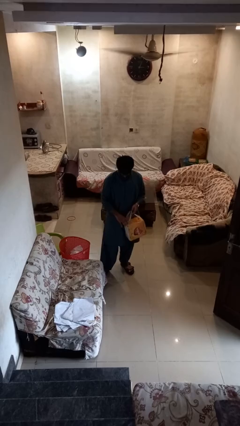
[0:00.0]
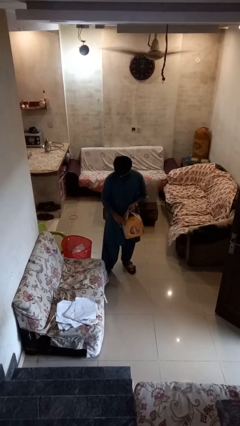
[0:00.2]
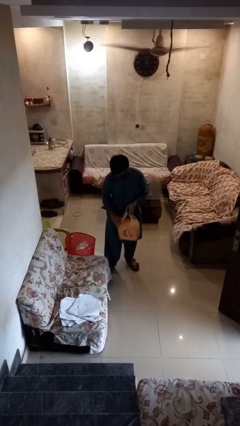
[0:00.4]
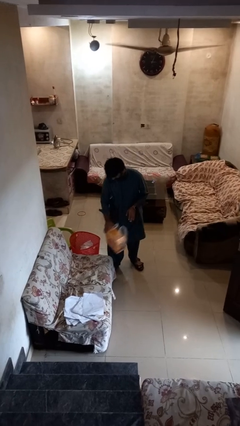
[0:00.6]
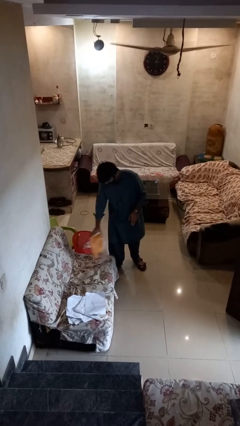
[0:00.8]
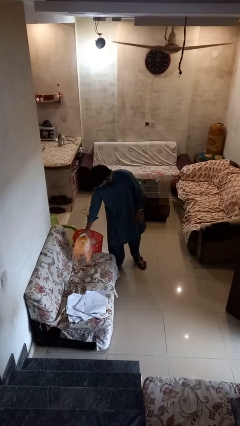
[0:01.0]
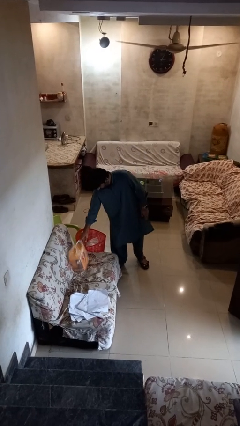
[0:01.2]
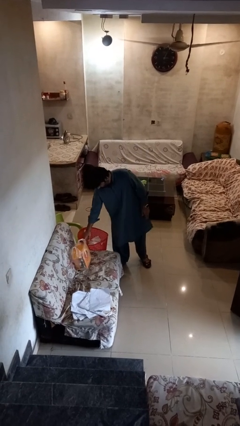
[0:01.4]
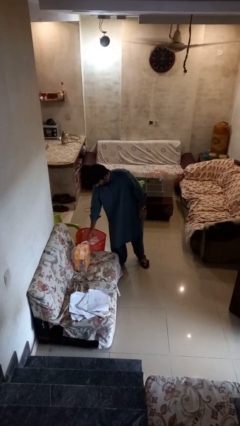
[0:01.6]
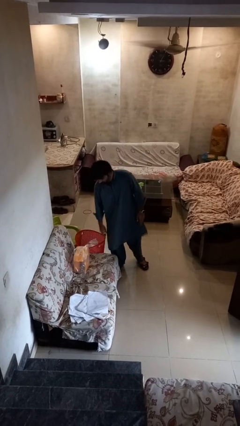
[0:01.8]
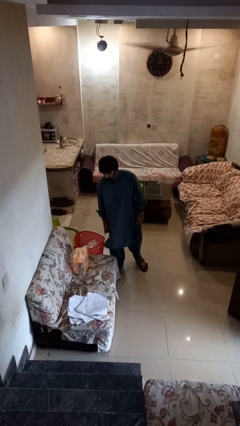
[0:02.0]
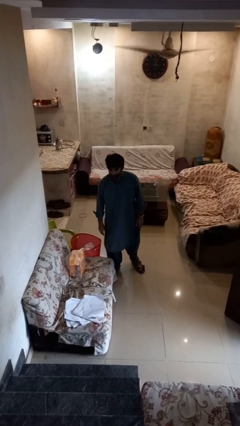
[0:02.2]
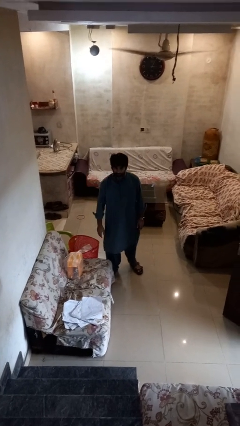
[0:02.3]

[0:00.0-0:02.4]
person puts down object on couch

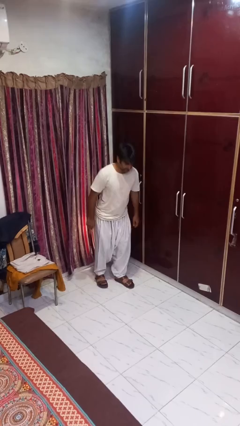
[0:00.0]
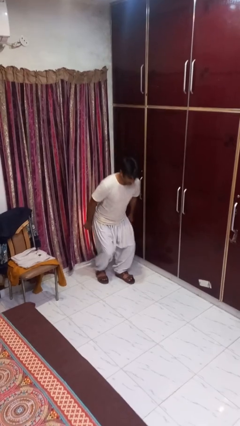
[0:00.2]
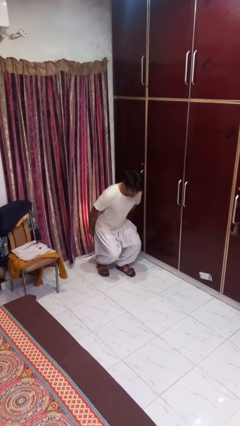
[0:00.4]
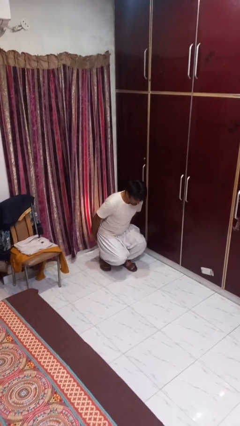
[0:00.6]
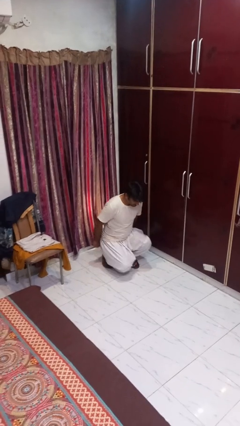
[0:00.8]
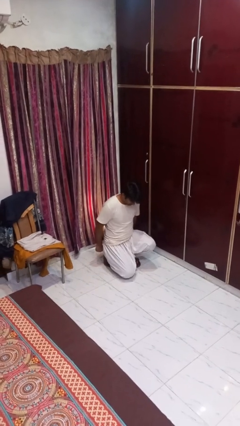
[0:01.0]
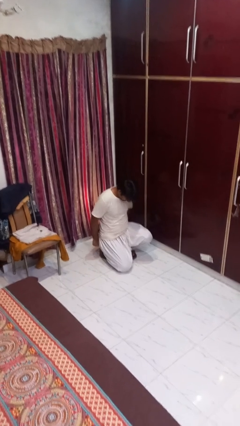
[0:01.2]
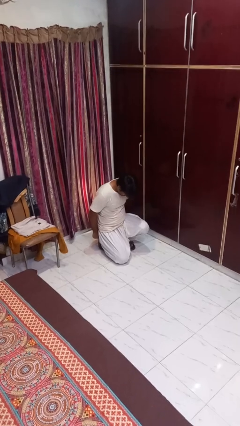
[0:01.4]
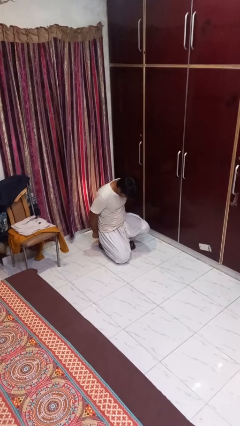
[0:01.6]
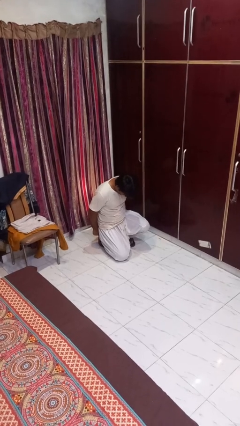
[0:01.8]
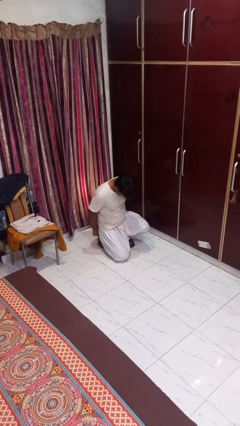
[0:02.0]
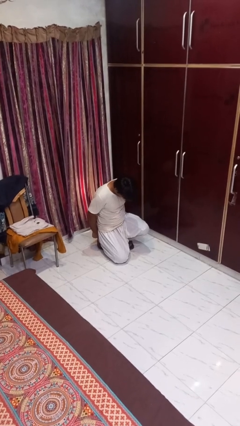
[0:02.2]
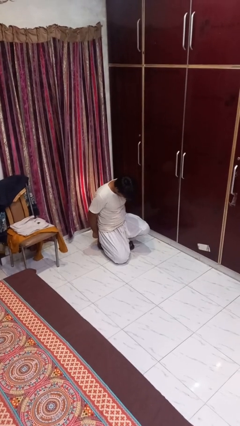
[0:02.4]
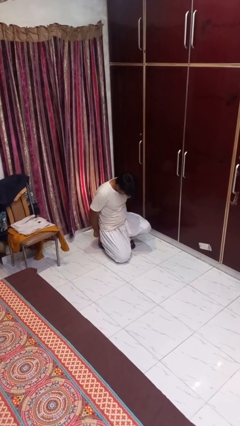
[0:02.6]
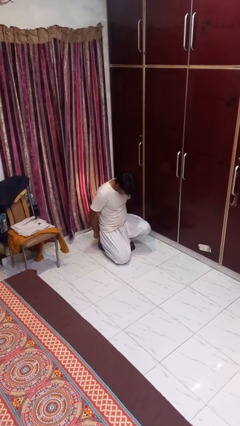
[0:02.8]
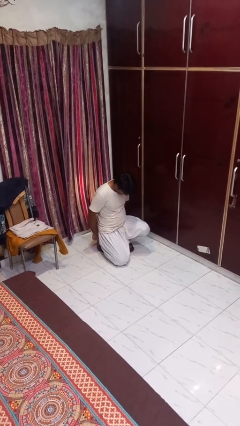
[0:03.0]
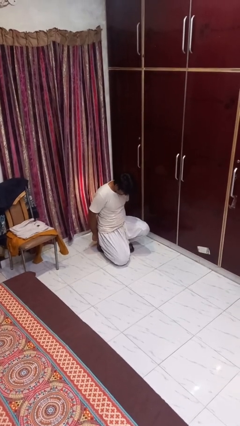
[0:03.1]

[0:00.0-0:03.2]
person kneels

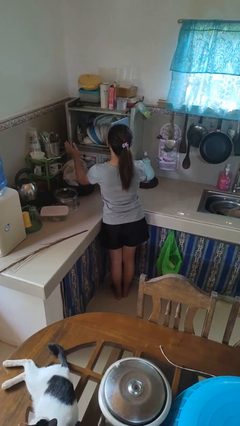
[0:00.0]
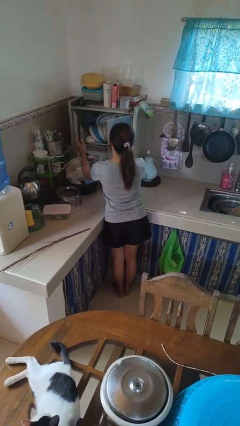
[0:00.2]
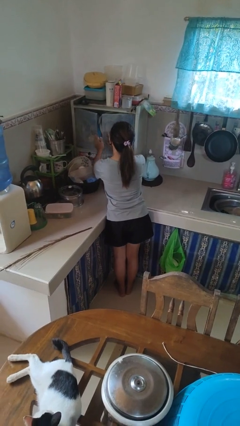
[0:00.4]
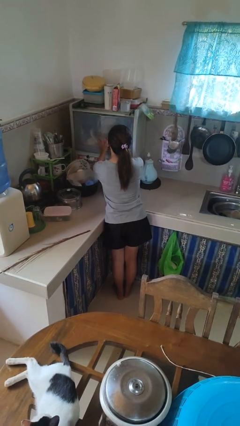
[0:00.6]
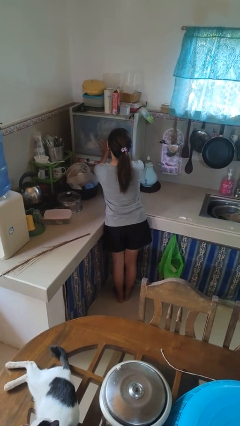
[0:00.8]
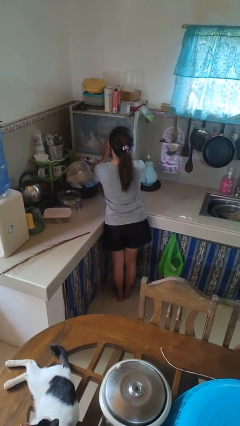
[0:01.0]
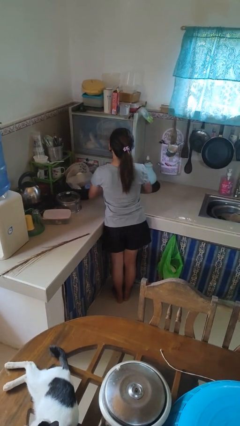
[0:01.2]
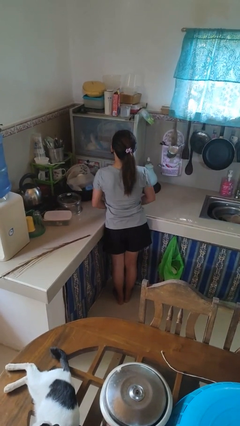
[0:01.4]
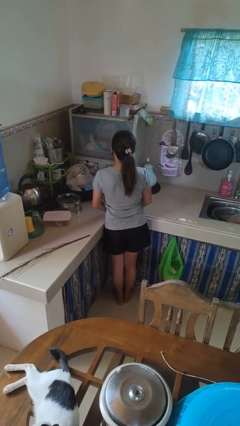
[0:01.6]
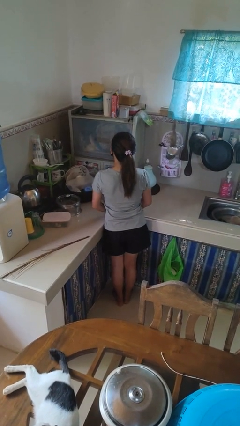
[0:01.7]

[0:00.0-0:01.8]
person closes kitchen drawer

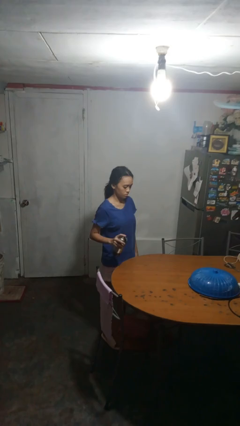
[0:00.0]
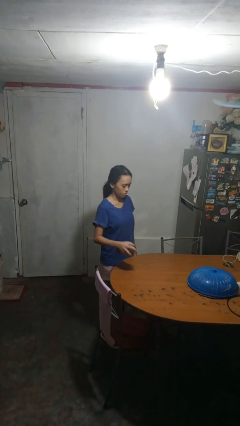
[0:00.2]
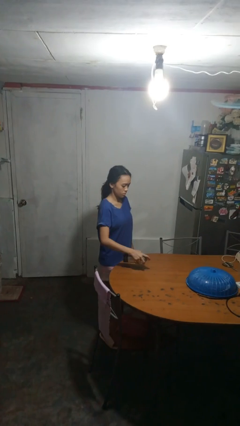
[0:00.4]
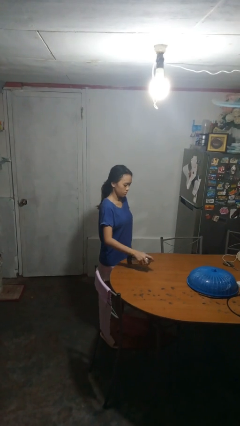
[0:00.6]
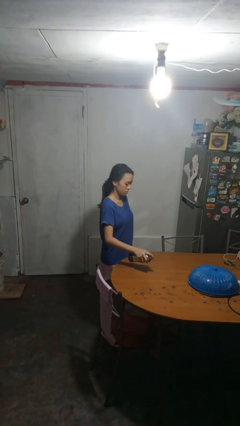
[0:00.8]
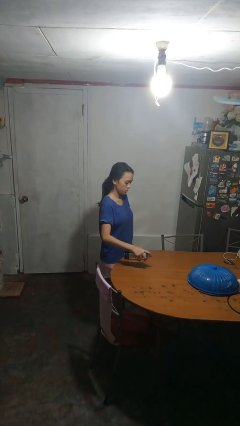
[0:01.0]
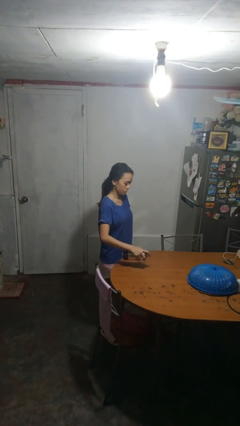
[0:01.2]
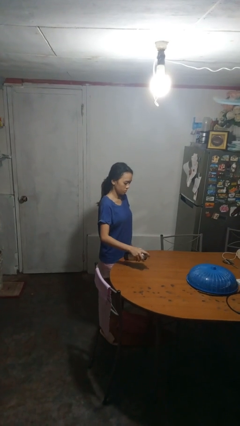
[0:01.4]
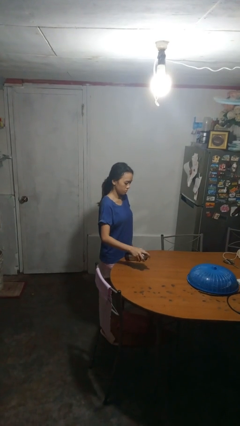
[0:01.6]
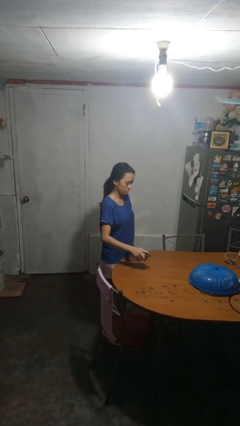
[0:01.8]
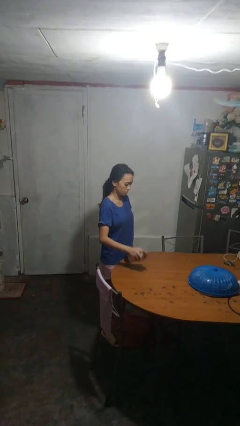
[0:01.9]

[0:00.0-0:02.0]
person sprays from bottle

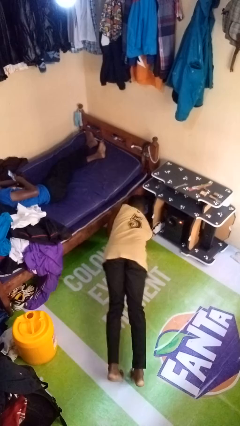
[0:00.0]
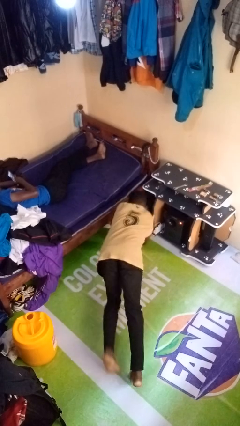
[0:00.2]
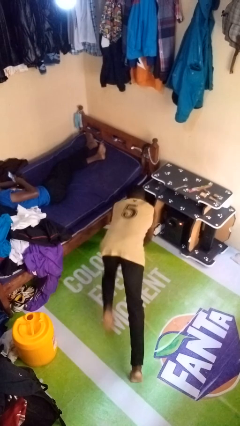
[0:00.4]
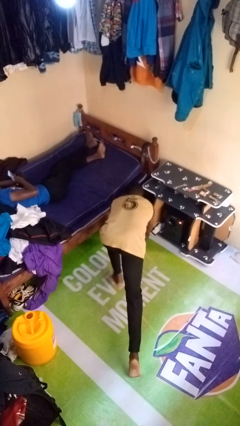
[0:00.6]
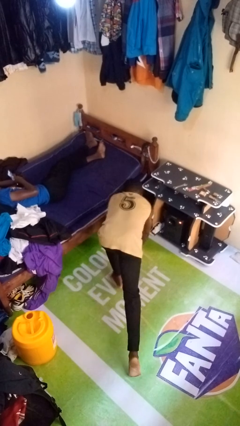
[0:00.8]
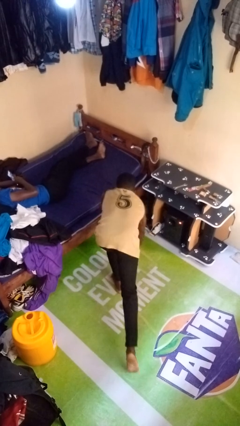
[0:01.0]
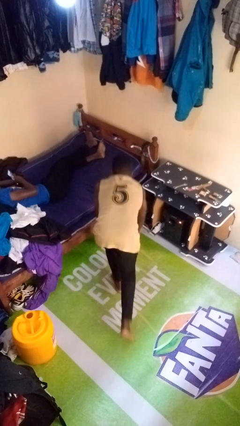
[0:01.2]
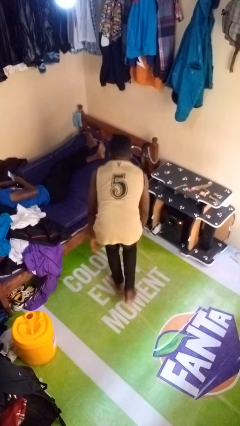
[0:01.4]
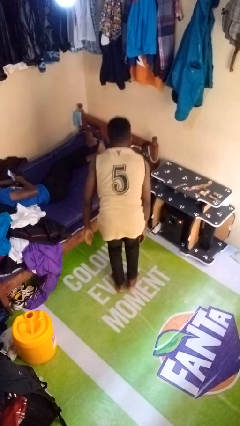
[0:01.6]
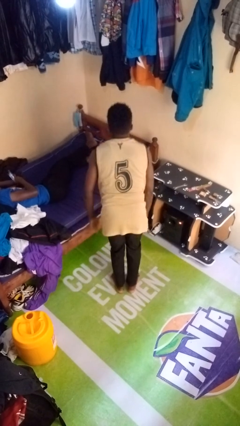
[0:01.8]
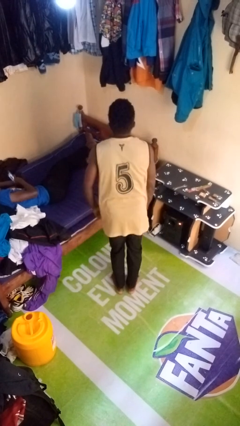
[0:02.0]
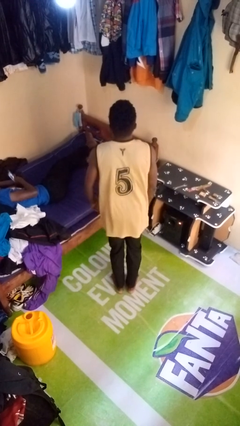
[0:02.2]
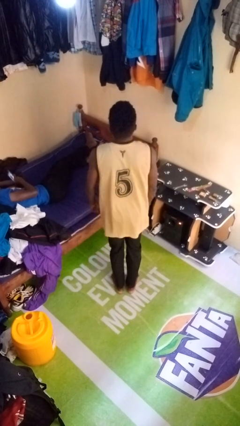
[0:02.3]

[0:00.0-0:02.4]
person stands up from floor

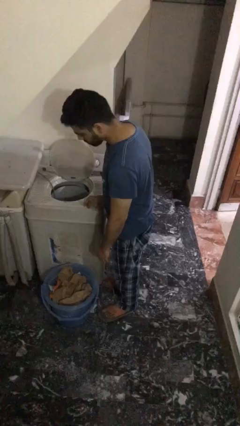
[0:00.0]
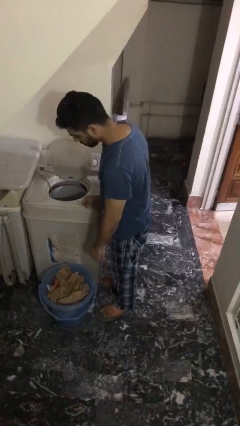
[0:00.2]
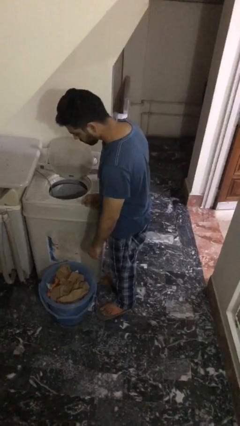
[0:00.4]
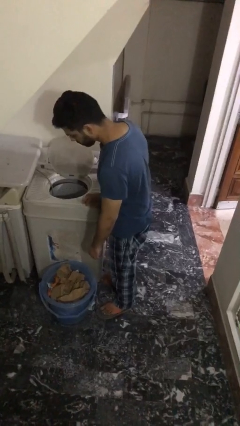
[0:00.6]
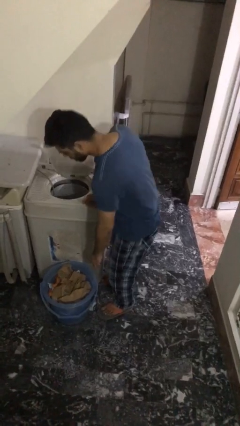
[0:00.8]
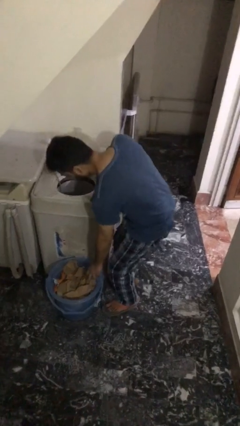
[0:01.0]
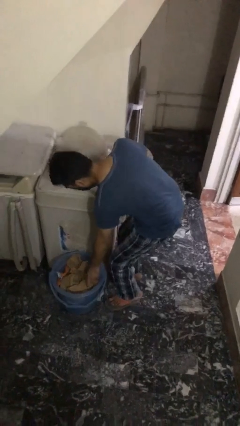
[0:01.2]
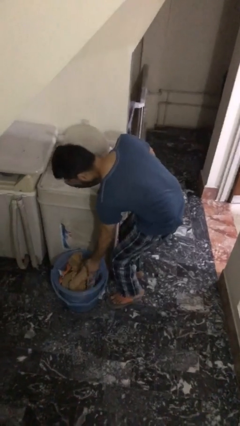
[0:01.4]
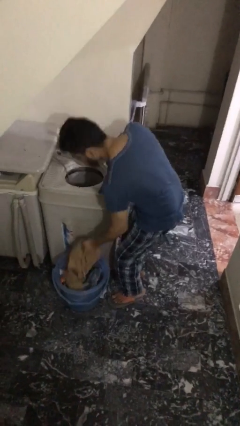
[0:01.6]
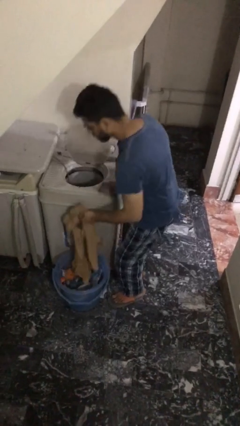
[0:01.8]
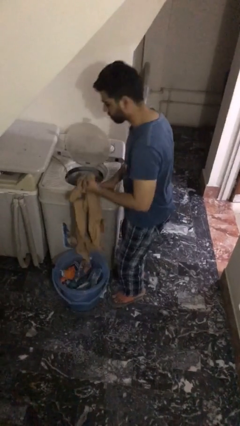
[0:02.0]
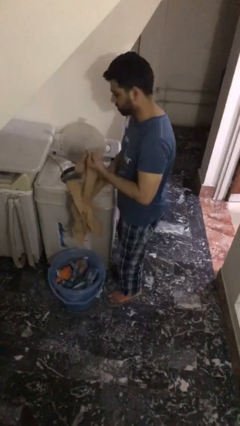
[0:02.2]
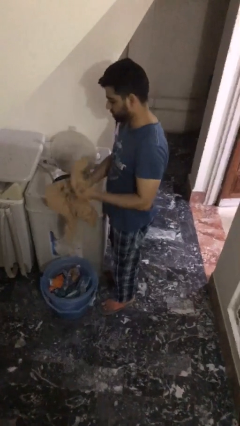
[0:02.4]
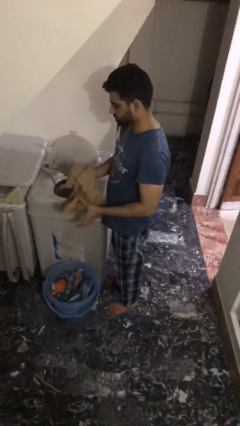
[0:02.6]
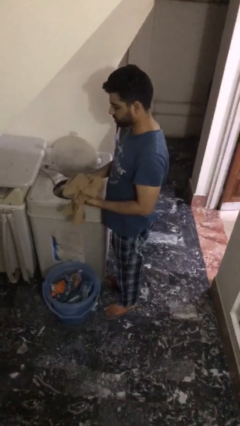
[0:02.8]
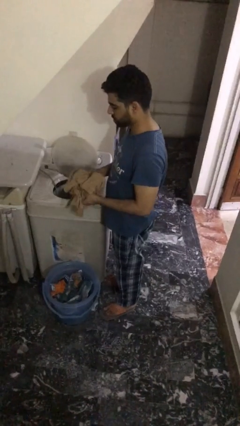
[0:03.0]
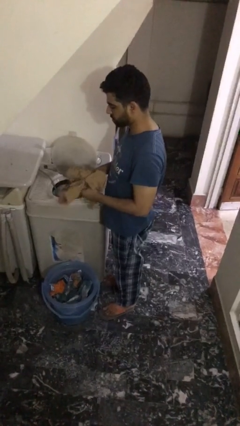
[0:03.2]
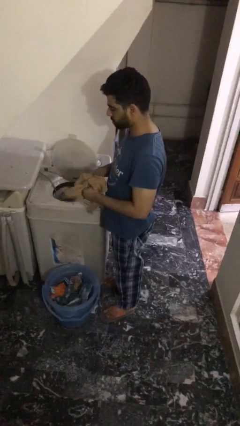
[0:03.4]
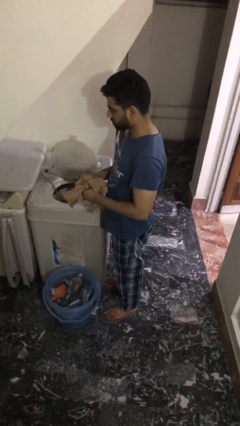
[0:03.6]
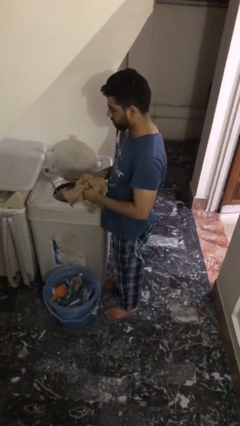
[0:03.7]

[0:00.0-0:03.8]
person unloads clotheswasher

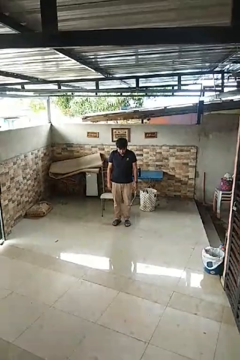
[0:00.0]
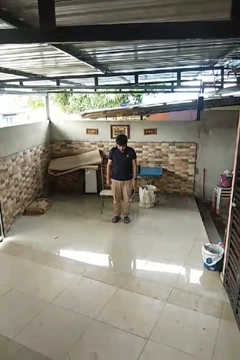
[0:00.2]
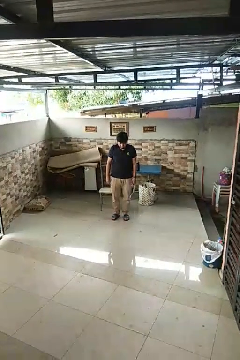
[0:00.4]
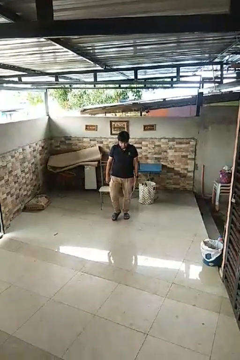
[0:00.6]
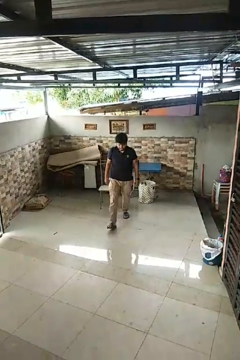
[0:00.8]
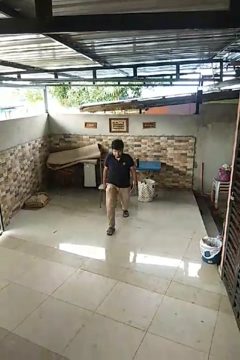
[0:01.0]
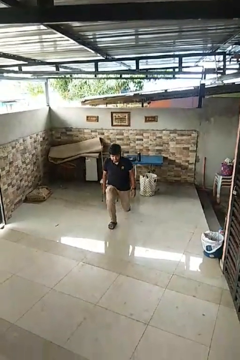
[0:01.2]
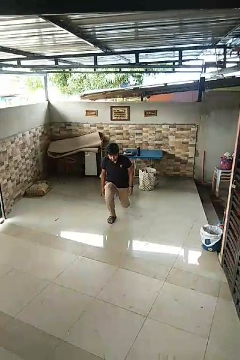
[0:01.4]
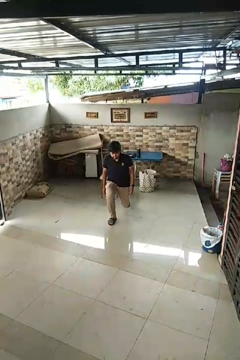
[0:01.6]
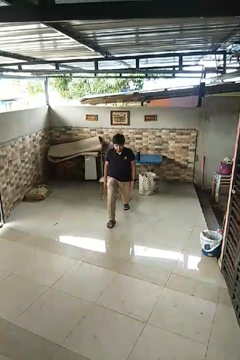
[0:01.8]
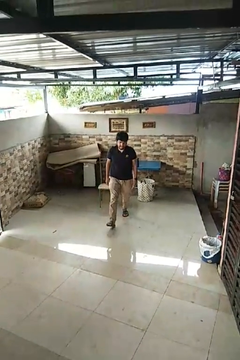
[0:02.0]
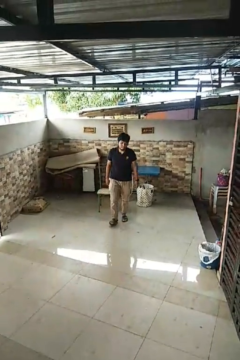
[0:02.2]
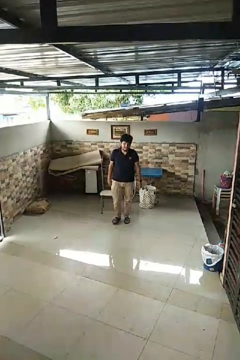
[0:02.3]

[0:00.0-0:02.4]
person exercises with lunges
